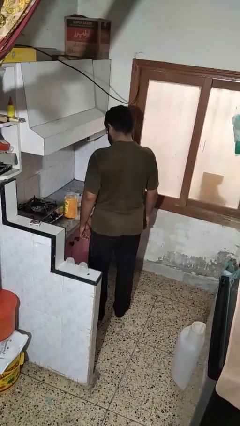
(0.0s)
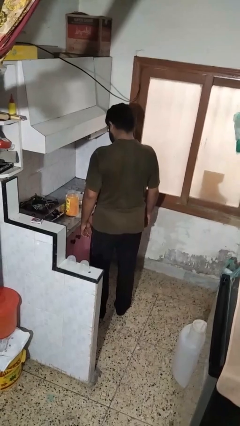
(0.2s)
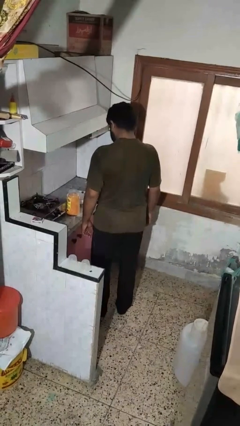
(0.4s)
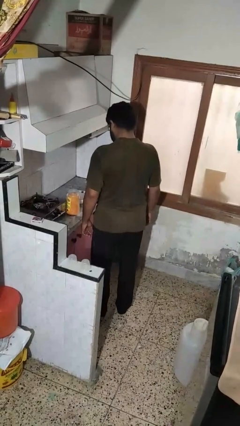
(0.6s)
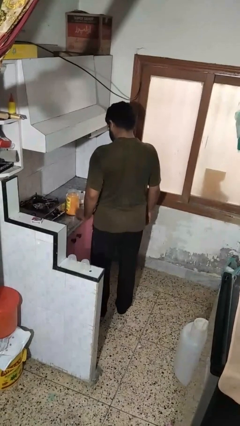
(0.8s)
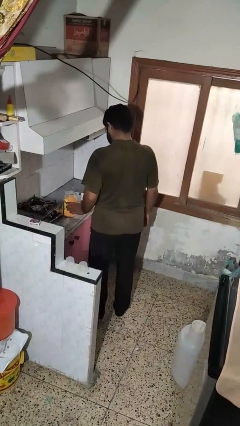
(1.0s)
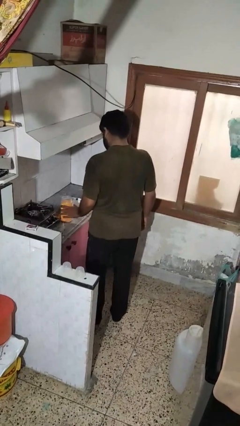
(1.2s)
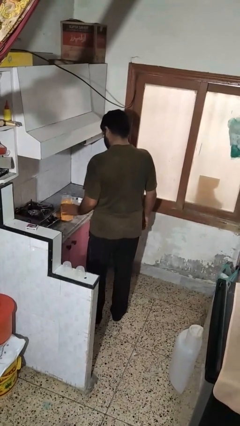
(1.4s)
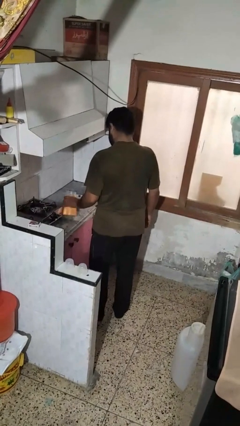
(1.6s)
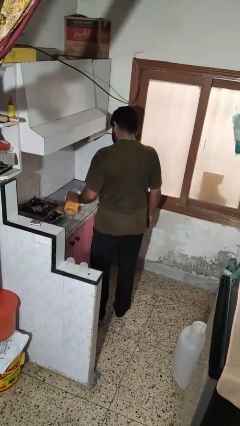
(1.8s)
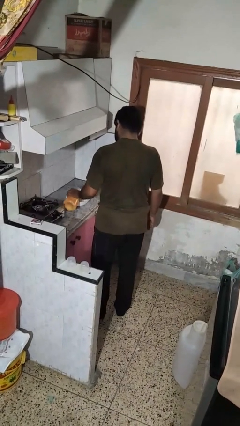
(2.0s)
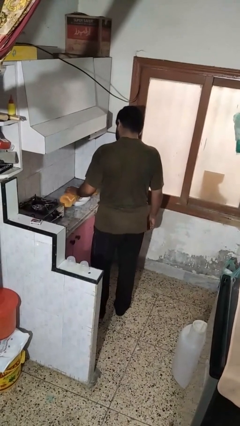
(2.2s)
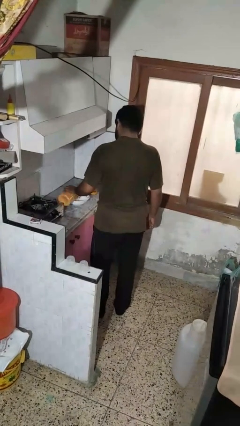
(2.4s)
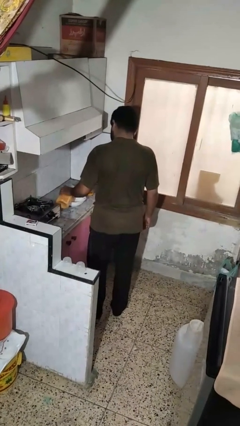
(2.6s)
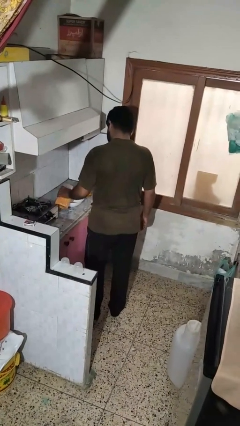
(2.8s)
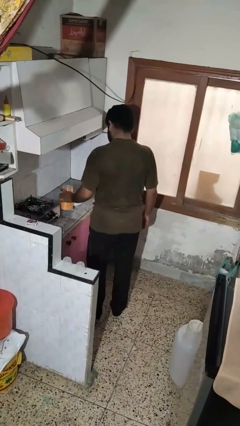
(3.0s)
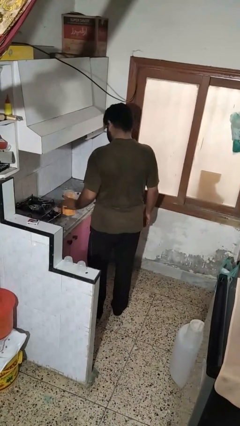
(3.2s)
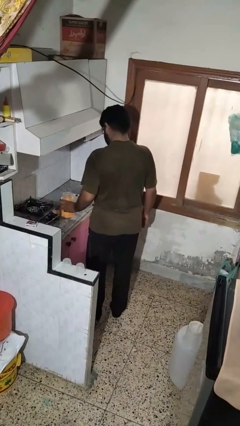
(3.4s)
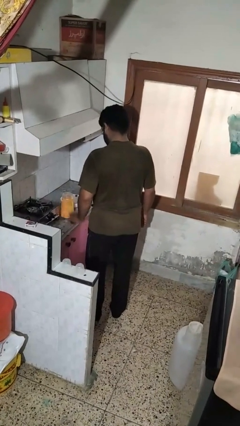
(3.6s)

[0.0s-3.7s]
person pours into bowl

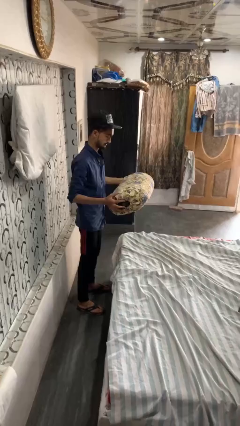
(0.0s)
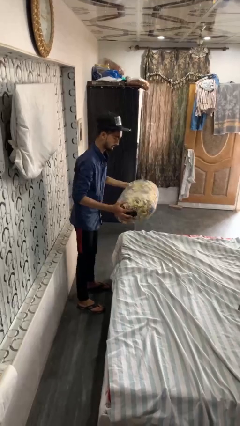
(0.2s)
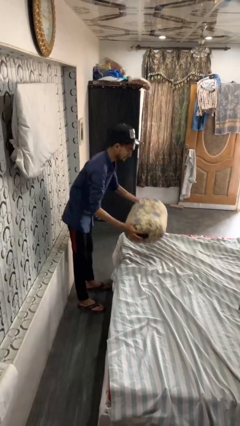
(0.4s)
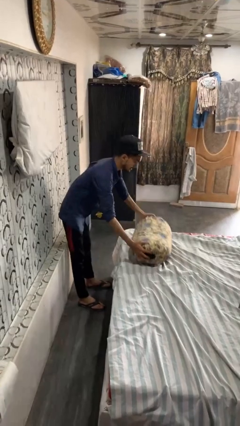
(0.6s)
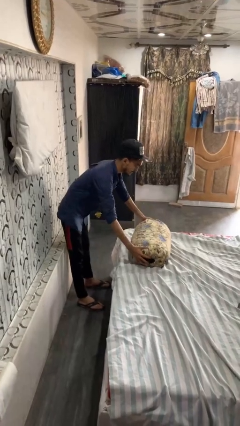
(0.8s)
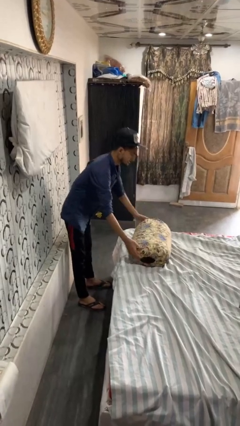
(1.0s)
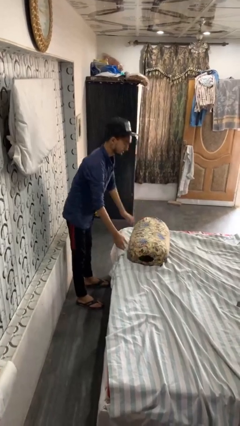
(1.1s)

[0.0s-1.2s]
person puts down object on bed

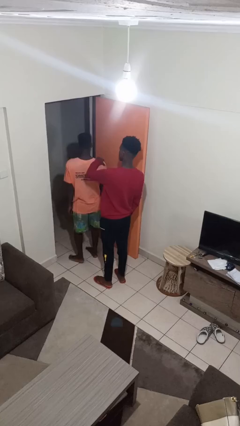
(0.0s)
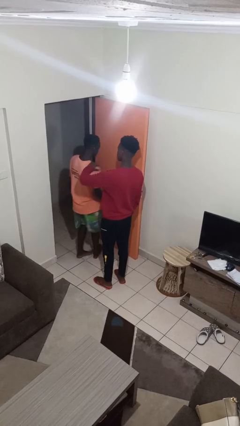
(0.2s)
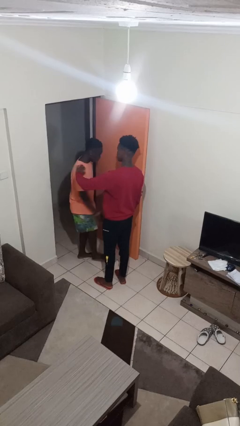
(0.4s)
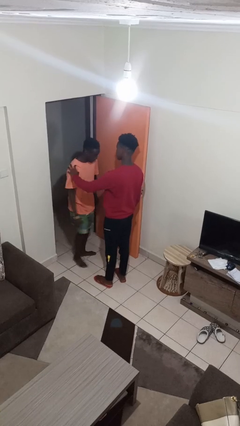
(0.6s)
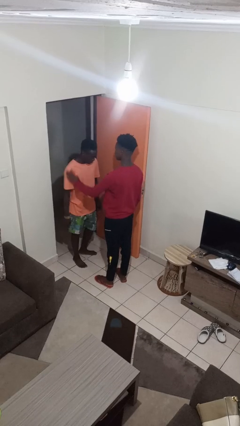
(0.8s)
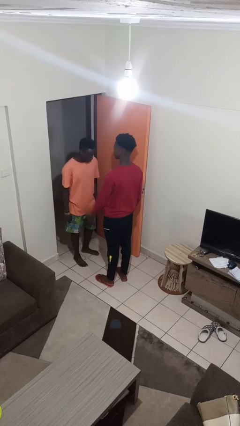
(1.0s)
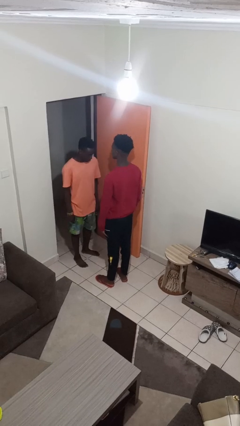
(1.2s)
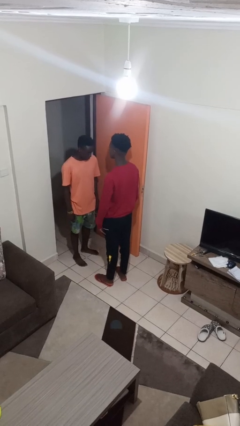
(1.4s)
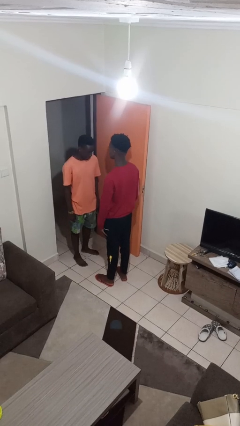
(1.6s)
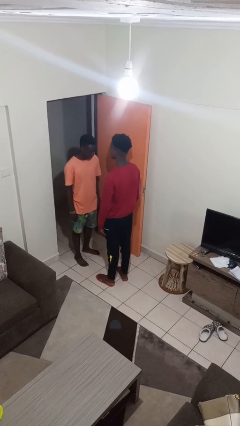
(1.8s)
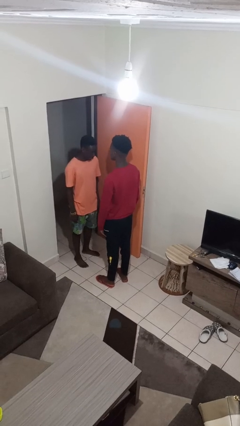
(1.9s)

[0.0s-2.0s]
person spins person around

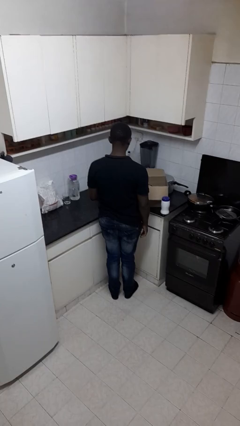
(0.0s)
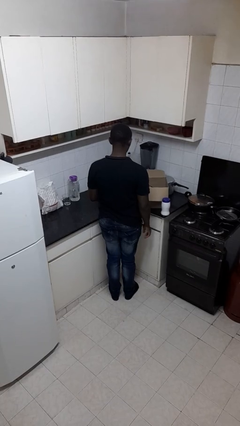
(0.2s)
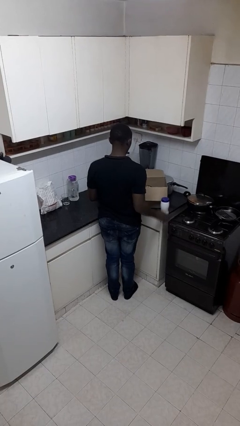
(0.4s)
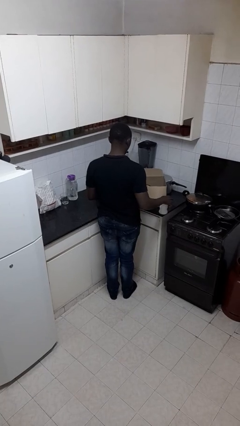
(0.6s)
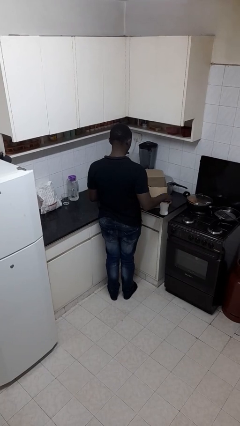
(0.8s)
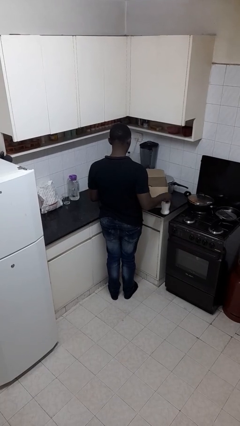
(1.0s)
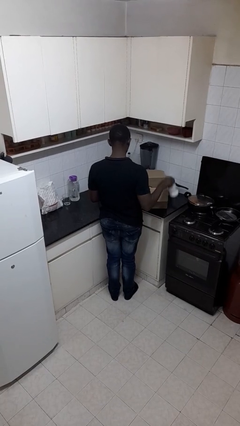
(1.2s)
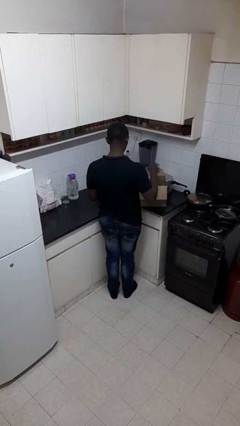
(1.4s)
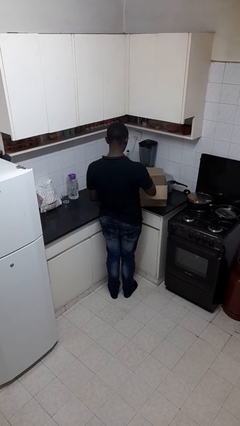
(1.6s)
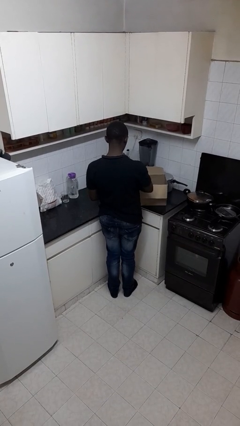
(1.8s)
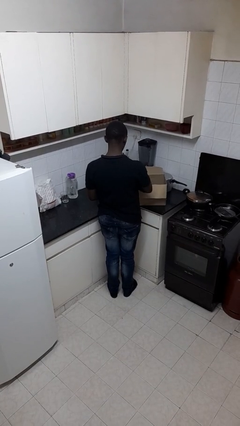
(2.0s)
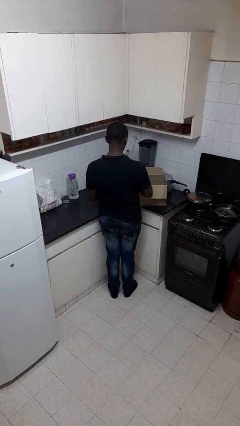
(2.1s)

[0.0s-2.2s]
person puts object into box

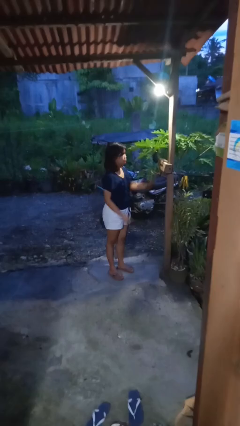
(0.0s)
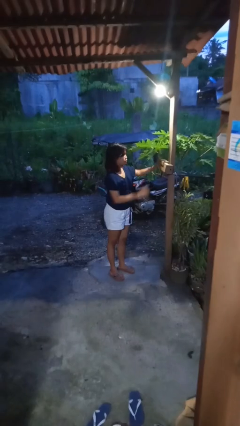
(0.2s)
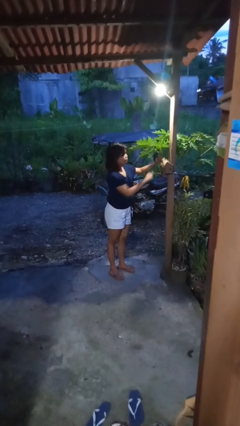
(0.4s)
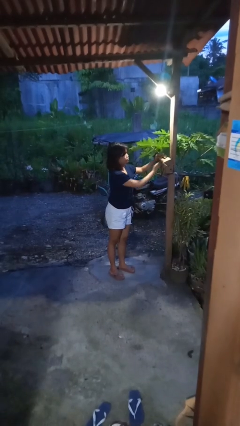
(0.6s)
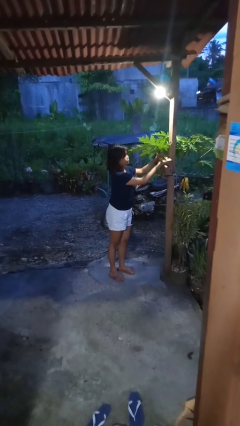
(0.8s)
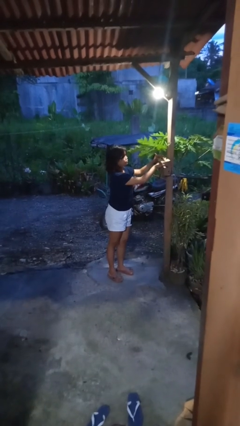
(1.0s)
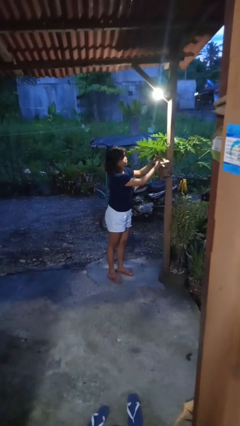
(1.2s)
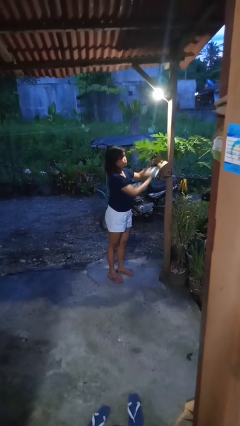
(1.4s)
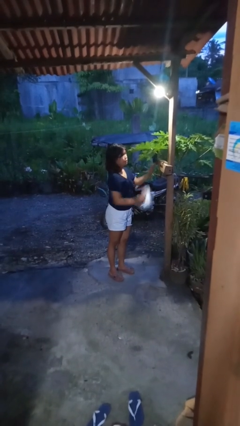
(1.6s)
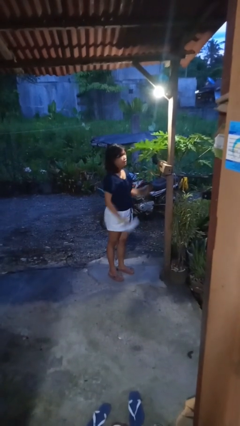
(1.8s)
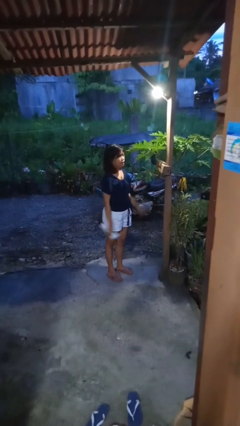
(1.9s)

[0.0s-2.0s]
person takes letters from mailbox

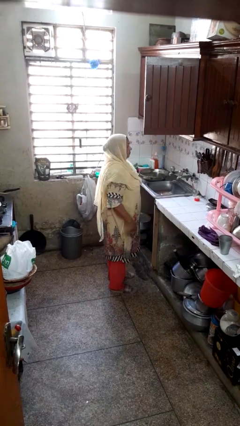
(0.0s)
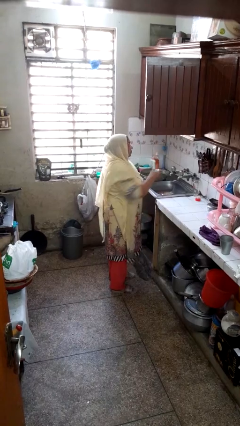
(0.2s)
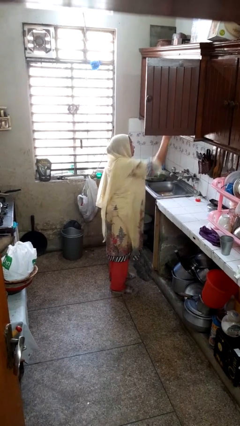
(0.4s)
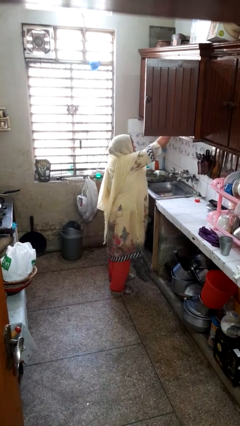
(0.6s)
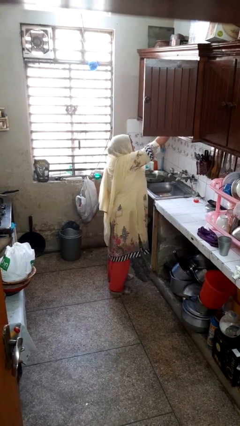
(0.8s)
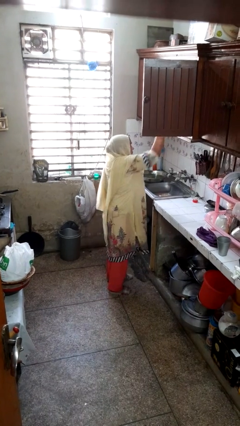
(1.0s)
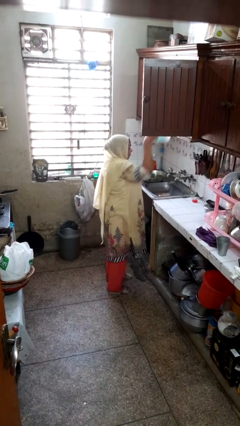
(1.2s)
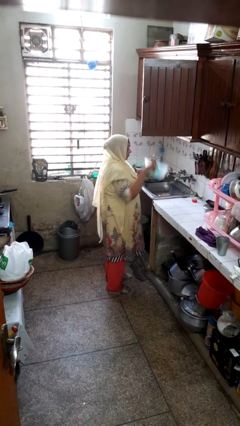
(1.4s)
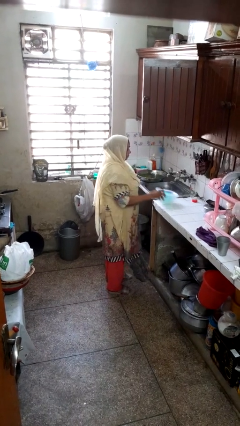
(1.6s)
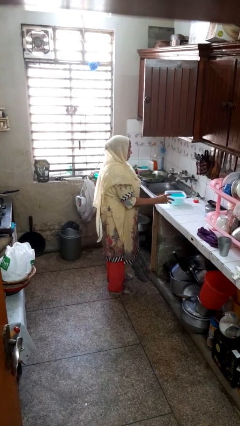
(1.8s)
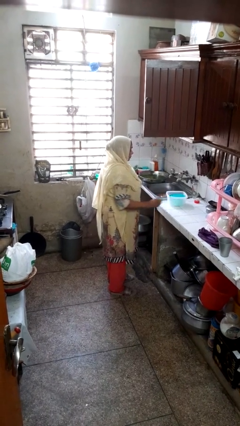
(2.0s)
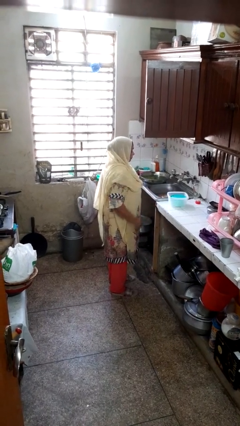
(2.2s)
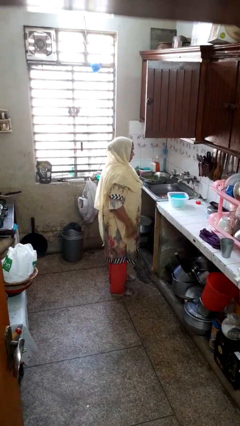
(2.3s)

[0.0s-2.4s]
person takes object from cabinet

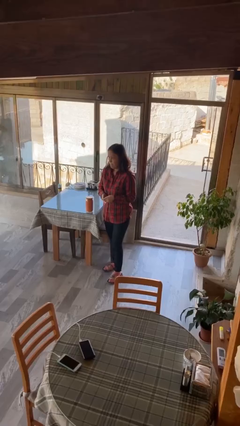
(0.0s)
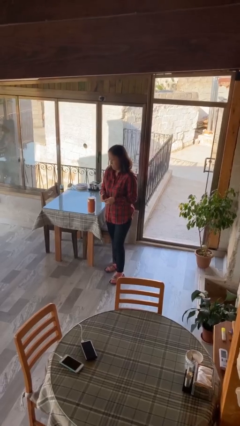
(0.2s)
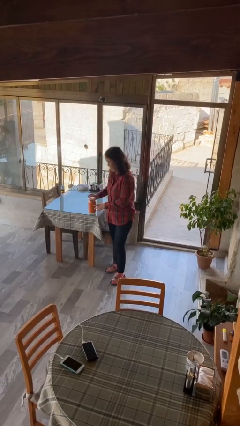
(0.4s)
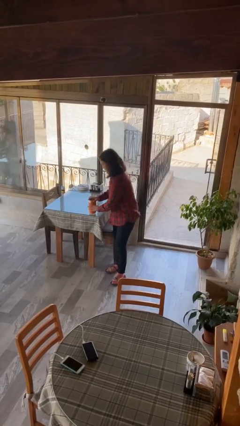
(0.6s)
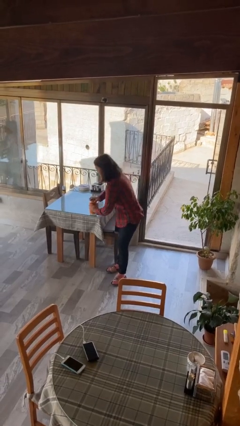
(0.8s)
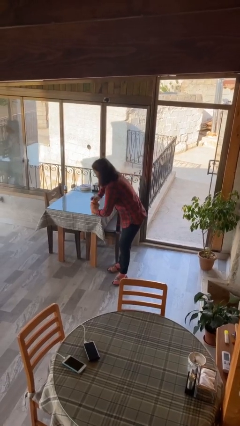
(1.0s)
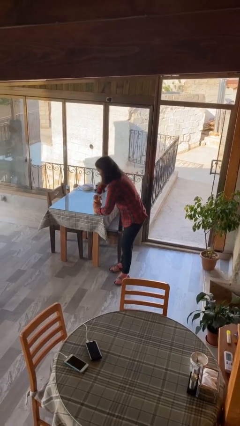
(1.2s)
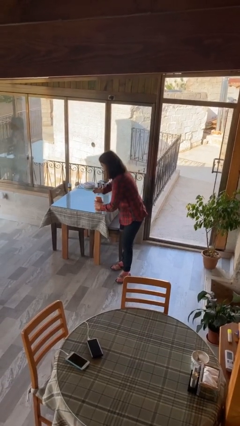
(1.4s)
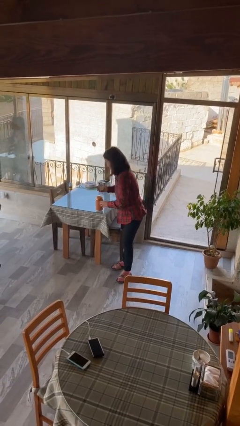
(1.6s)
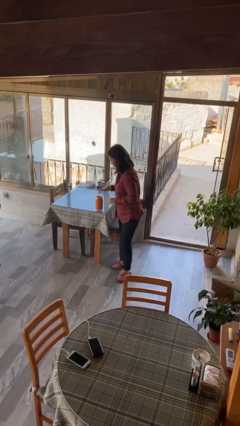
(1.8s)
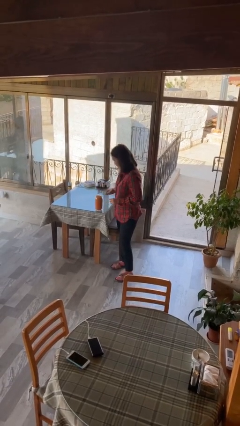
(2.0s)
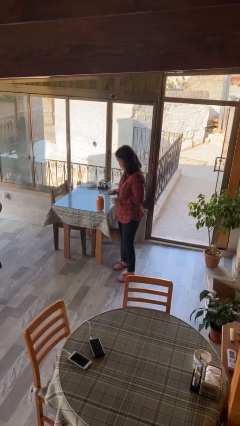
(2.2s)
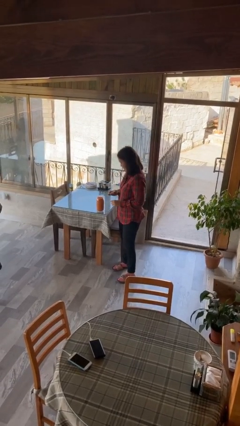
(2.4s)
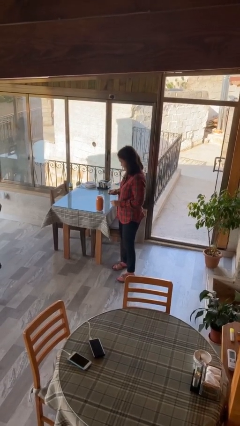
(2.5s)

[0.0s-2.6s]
person opens jar

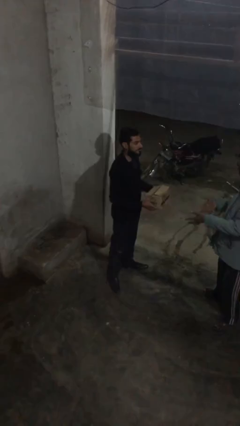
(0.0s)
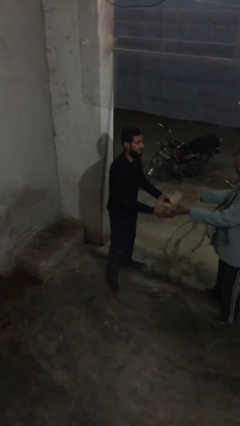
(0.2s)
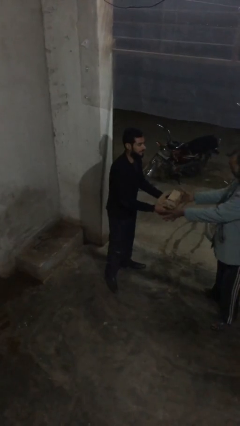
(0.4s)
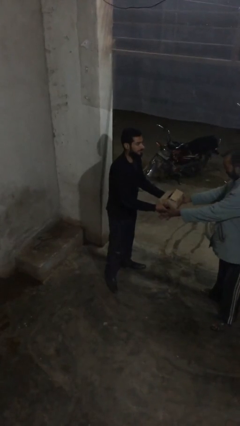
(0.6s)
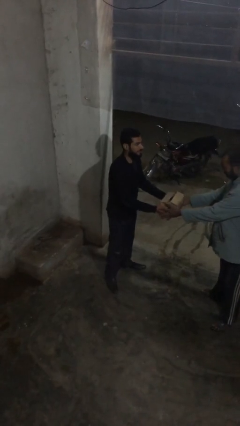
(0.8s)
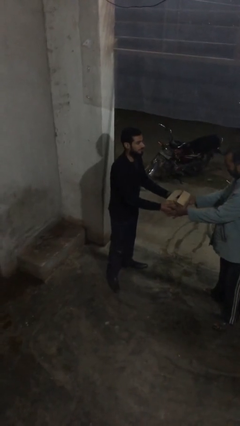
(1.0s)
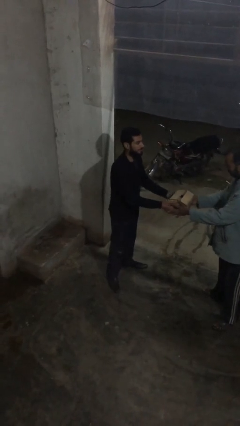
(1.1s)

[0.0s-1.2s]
person transfers object to person

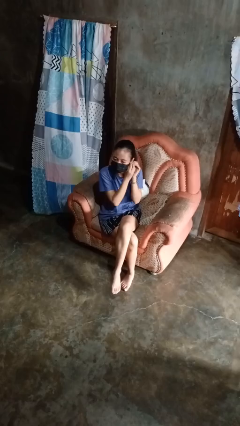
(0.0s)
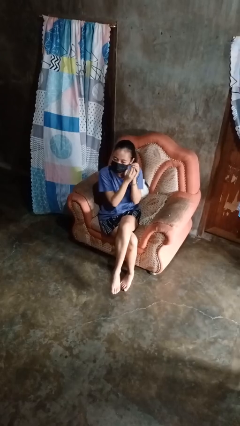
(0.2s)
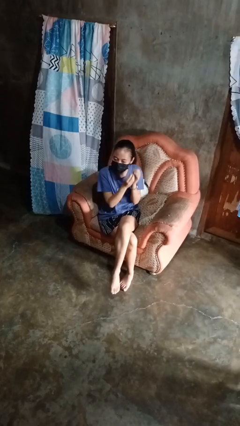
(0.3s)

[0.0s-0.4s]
person takes off earrings
